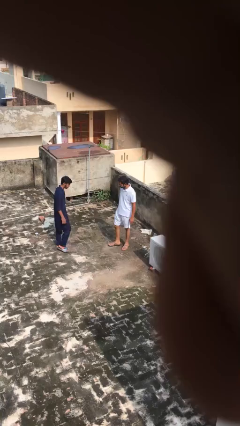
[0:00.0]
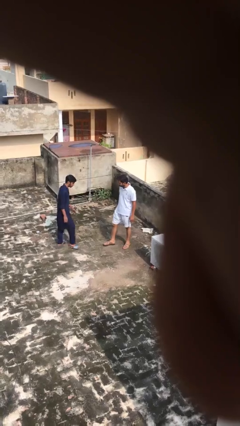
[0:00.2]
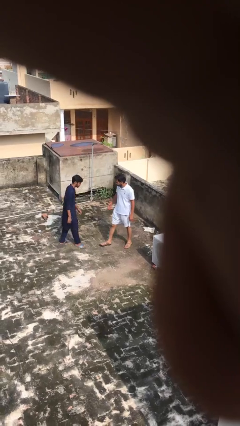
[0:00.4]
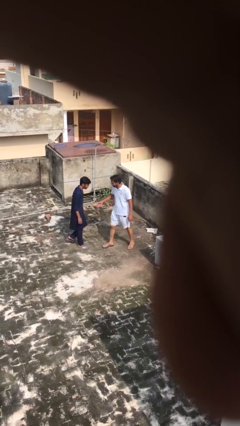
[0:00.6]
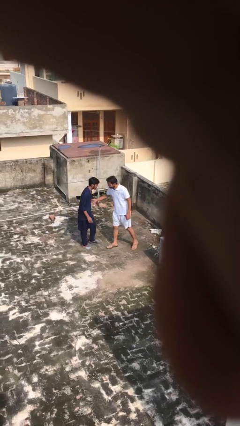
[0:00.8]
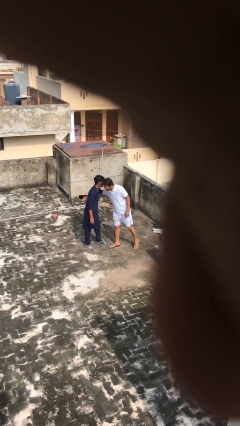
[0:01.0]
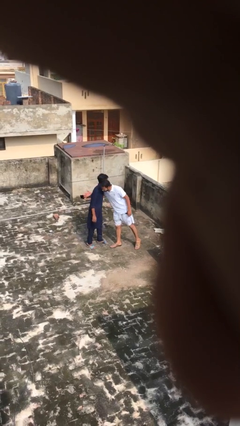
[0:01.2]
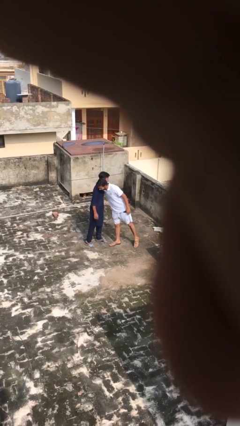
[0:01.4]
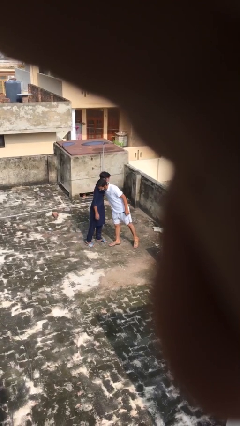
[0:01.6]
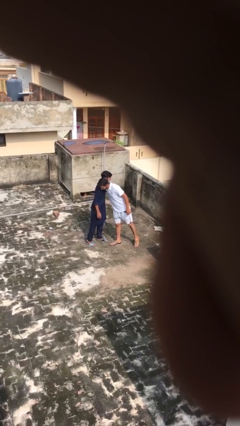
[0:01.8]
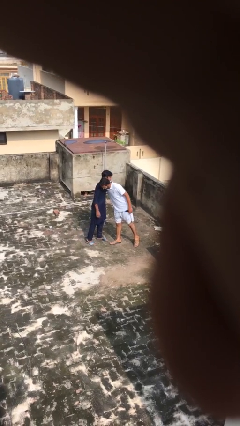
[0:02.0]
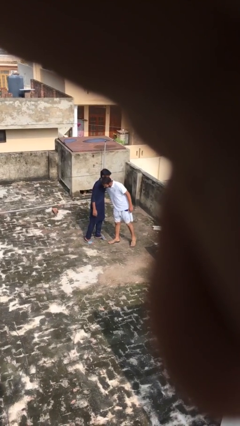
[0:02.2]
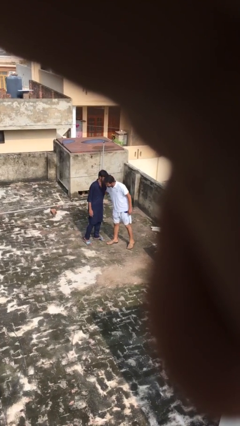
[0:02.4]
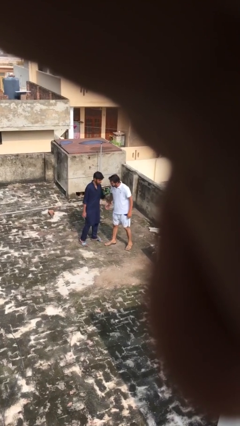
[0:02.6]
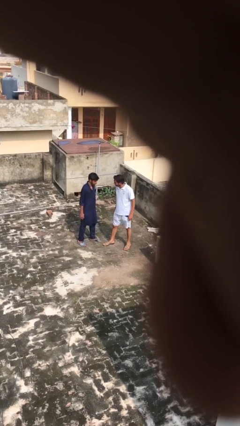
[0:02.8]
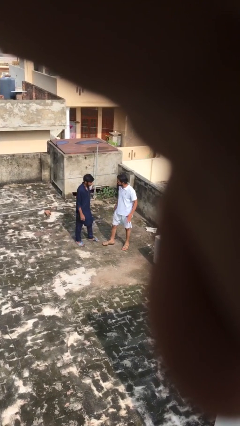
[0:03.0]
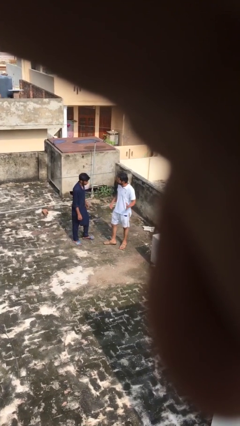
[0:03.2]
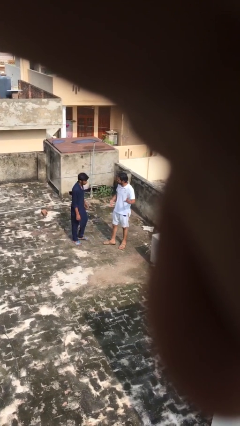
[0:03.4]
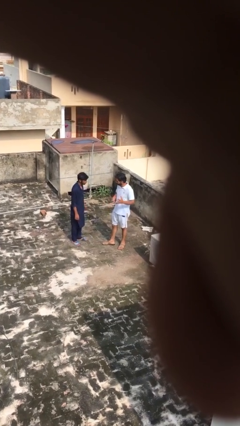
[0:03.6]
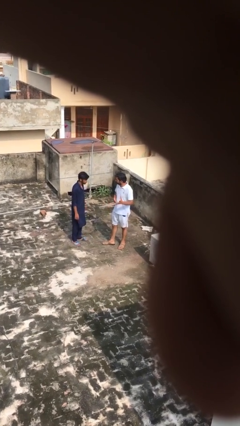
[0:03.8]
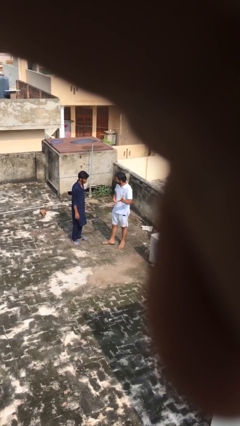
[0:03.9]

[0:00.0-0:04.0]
person embraces person

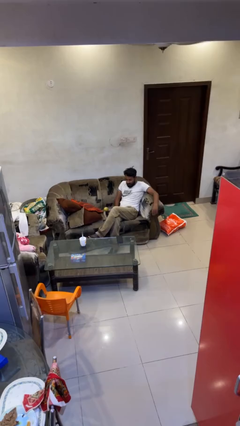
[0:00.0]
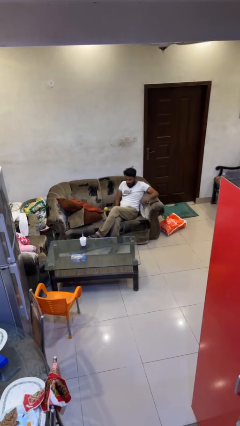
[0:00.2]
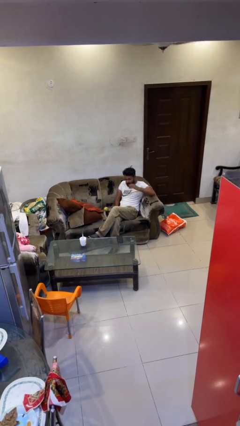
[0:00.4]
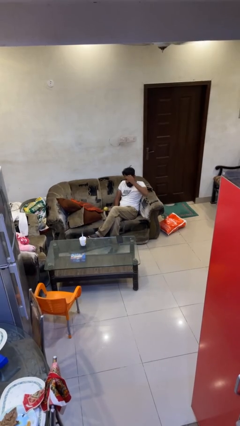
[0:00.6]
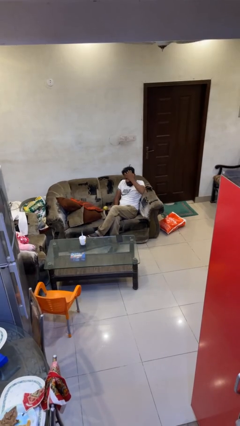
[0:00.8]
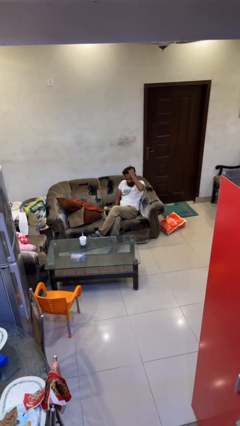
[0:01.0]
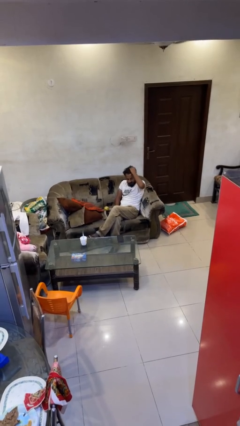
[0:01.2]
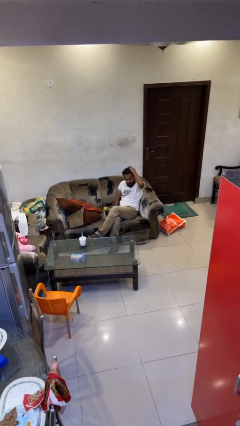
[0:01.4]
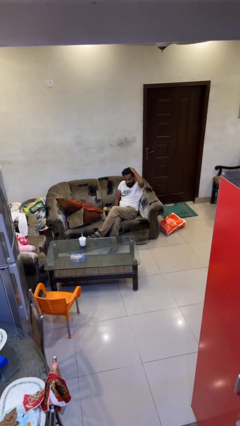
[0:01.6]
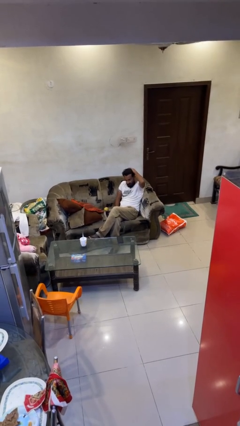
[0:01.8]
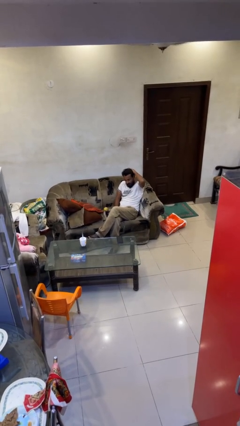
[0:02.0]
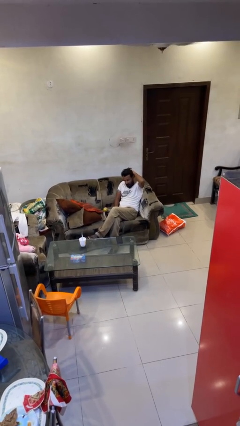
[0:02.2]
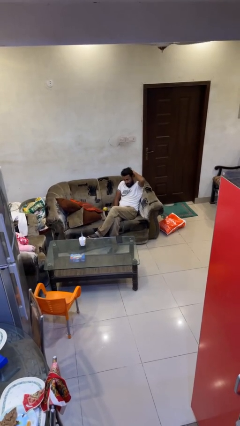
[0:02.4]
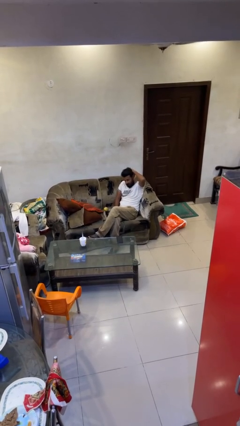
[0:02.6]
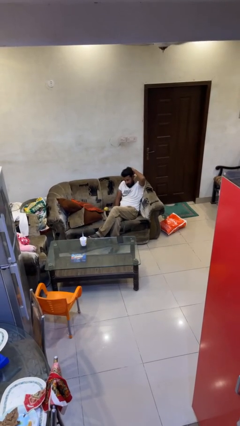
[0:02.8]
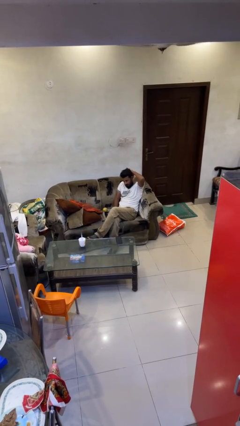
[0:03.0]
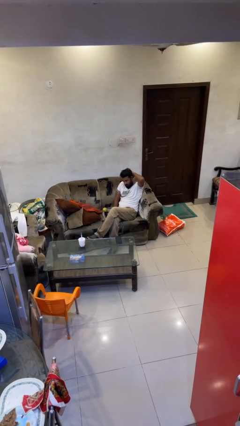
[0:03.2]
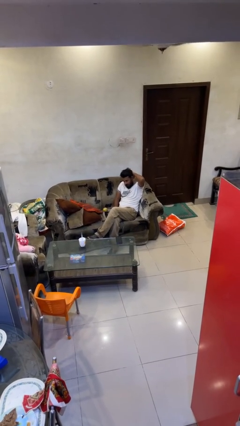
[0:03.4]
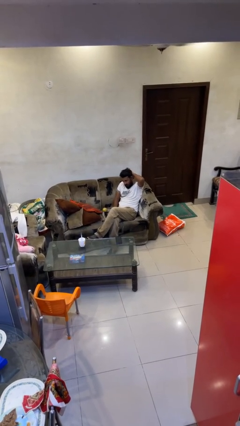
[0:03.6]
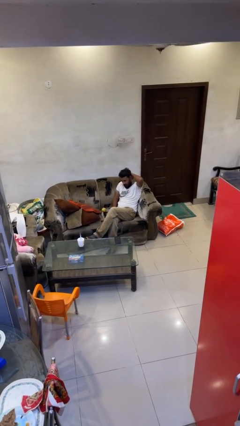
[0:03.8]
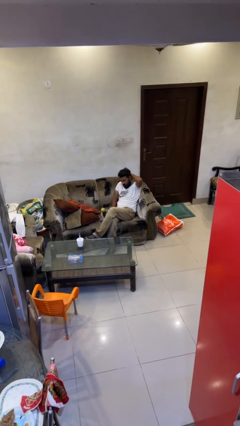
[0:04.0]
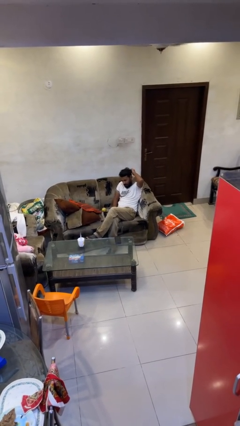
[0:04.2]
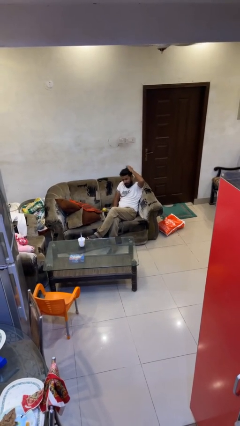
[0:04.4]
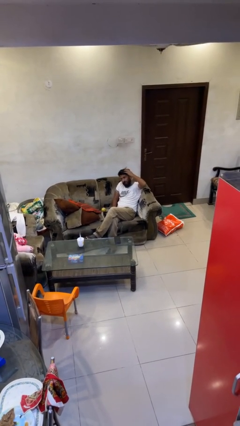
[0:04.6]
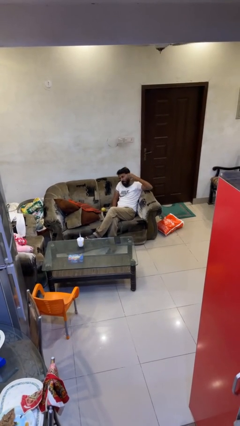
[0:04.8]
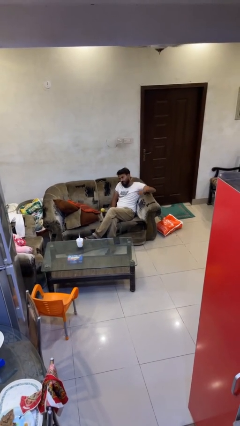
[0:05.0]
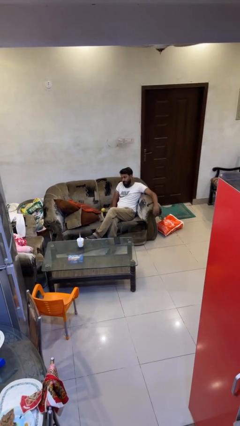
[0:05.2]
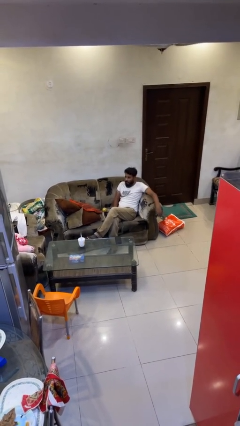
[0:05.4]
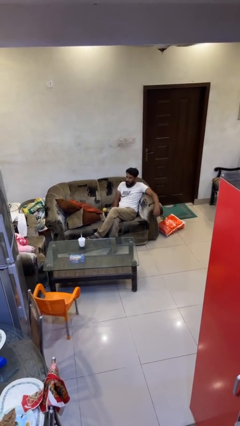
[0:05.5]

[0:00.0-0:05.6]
person strokes hair

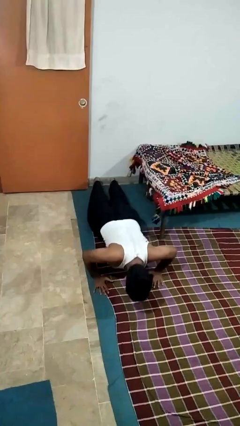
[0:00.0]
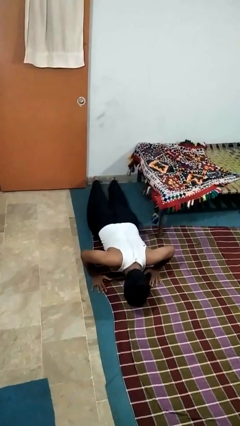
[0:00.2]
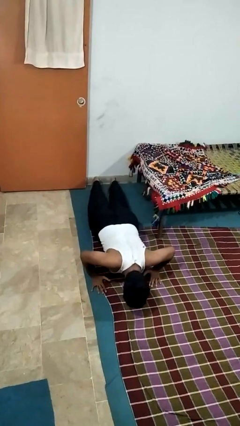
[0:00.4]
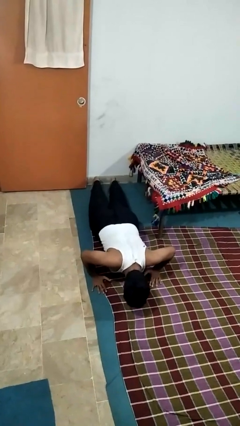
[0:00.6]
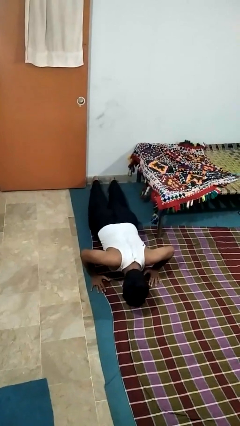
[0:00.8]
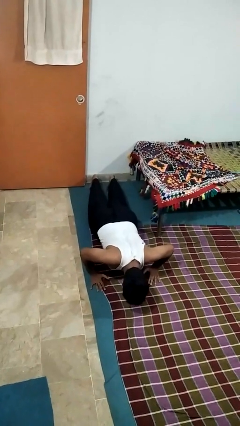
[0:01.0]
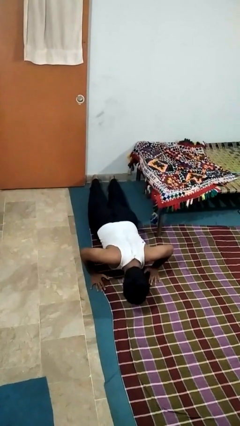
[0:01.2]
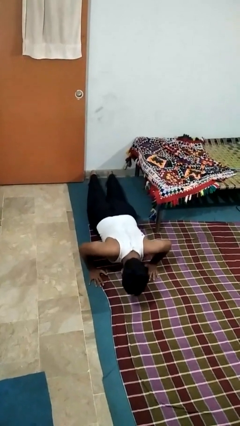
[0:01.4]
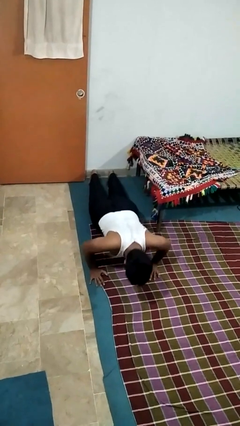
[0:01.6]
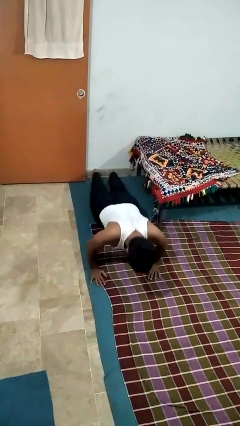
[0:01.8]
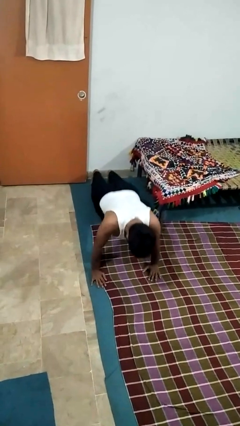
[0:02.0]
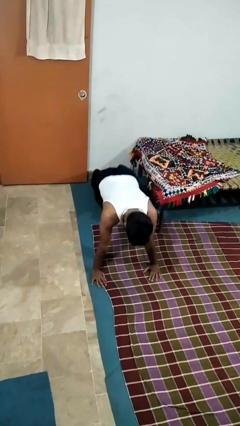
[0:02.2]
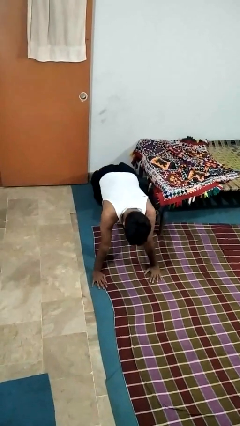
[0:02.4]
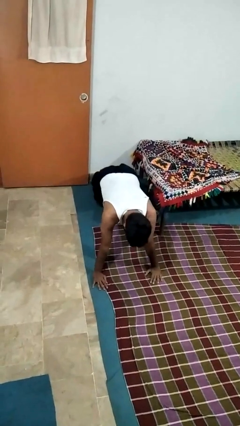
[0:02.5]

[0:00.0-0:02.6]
person exercises with pushup

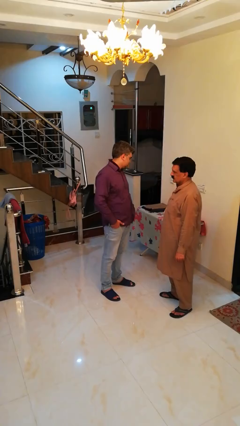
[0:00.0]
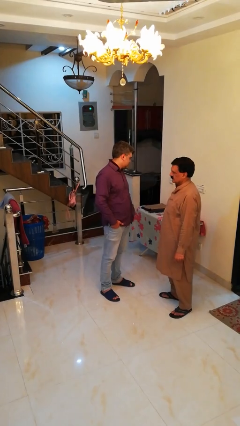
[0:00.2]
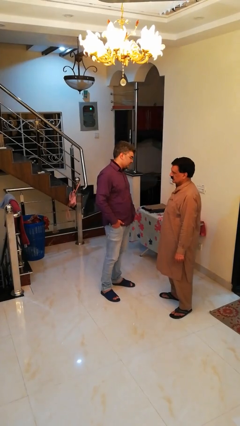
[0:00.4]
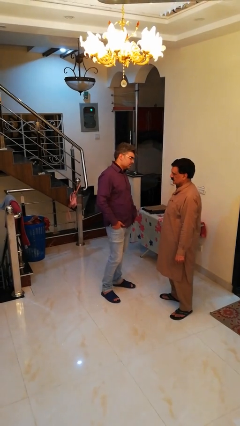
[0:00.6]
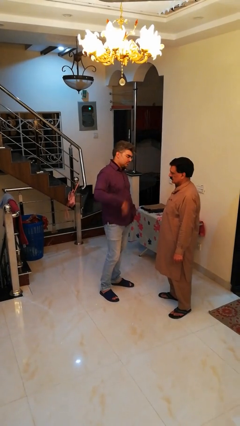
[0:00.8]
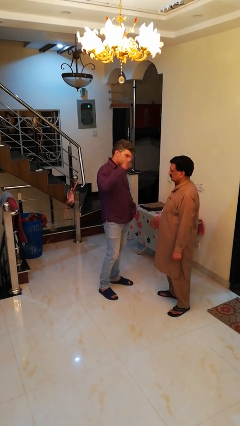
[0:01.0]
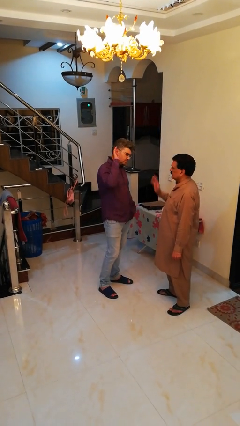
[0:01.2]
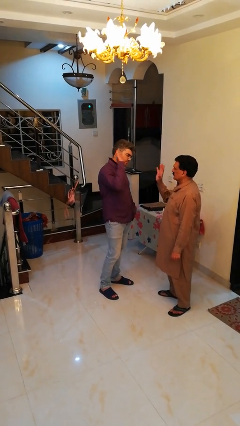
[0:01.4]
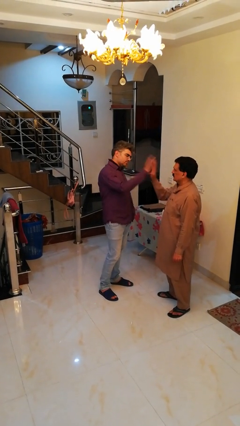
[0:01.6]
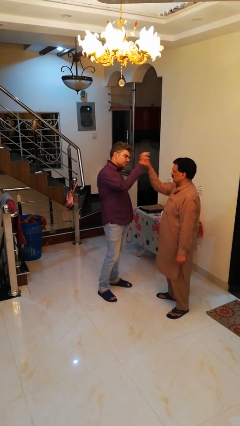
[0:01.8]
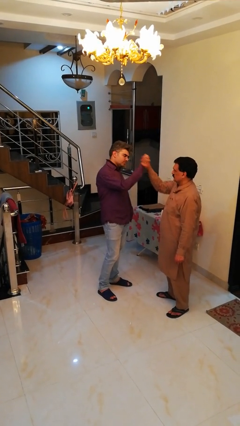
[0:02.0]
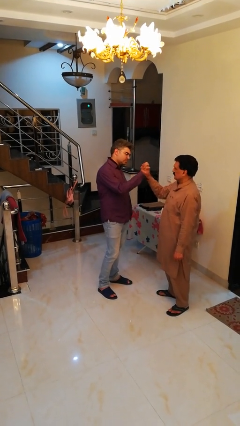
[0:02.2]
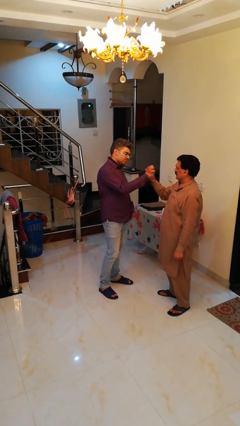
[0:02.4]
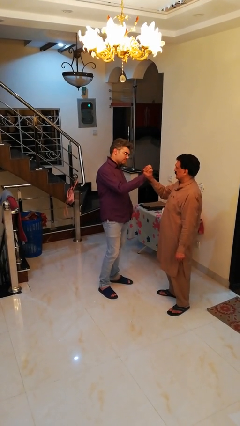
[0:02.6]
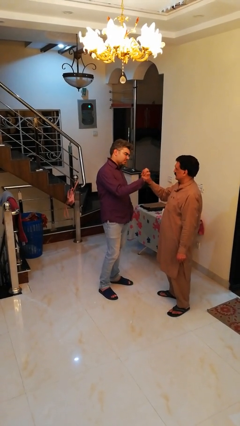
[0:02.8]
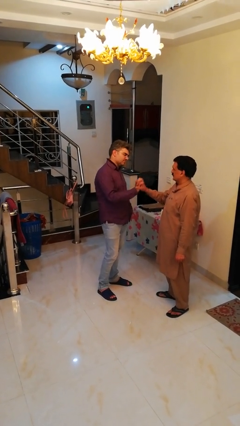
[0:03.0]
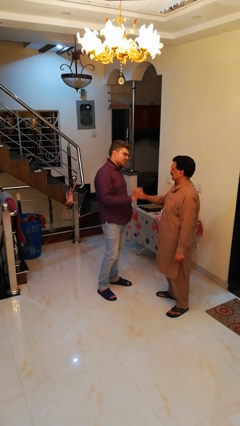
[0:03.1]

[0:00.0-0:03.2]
person highfives hand

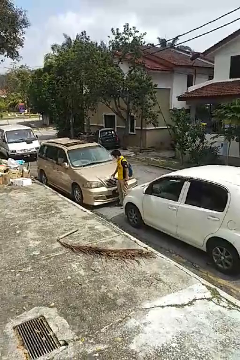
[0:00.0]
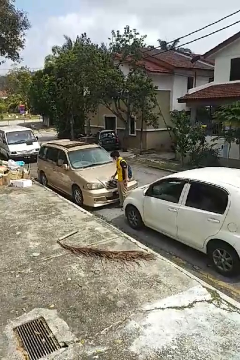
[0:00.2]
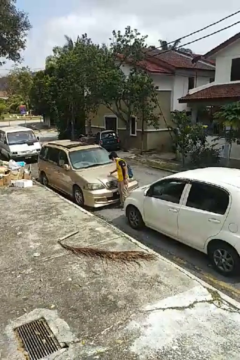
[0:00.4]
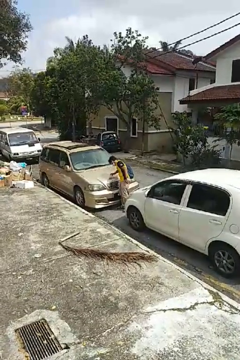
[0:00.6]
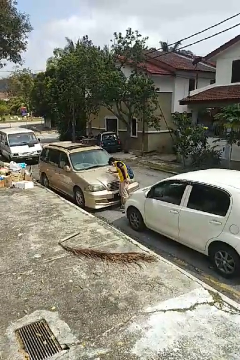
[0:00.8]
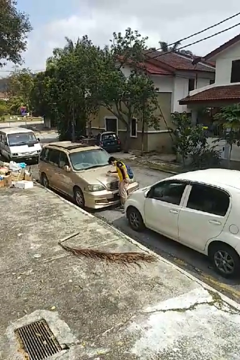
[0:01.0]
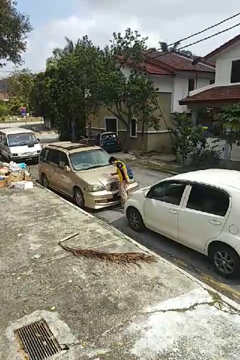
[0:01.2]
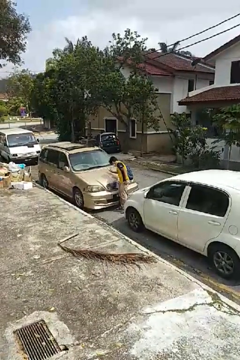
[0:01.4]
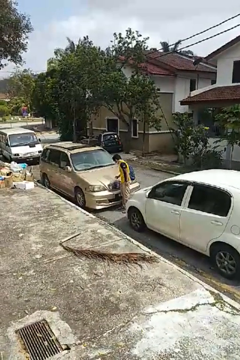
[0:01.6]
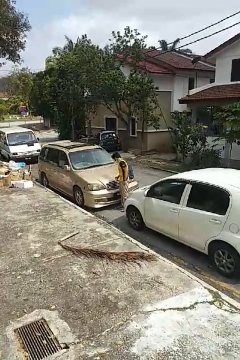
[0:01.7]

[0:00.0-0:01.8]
person polishes car with rag

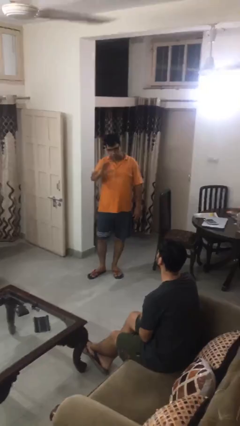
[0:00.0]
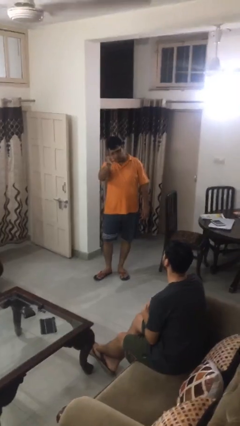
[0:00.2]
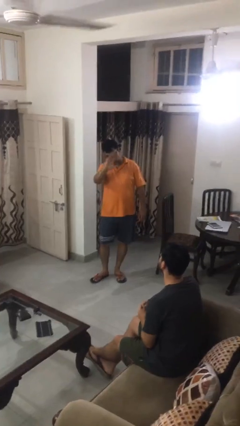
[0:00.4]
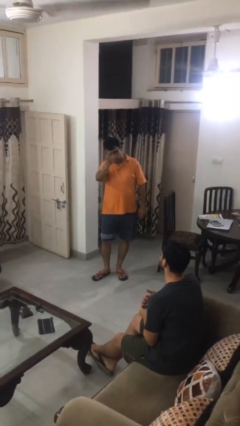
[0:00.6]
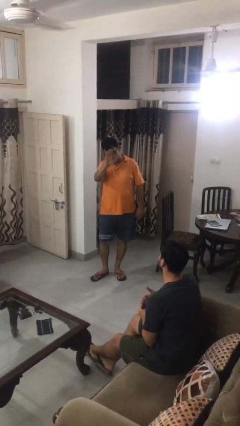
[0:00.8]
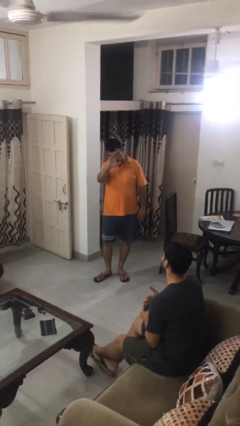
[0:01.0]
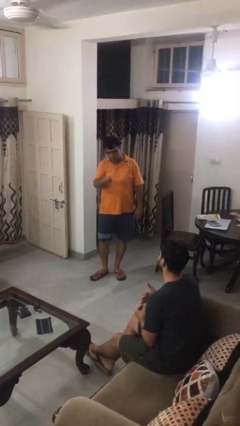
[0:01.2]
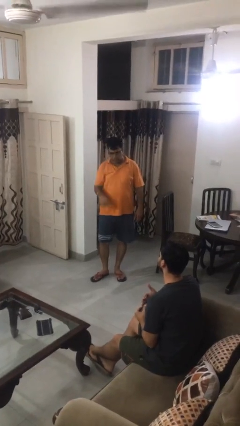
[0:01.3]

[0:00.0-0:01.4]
person waves at person
